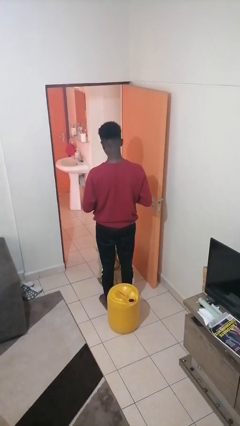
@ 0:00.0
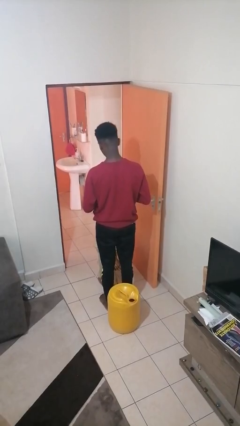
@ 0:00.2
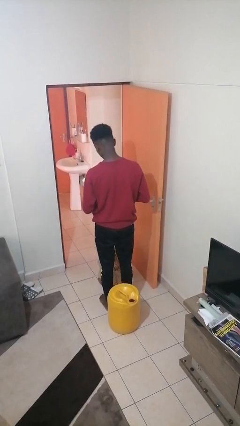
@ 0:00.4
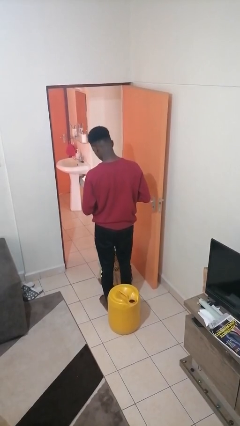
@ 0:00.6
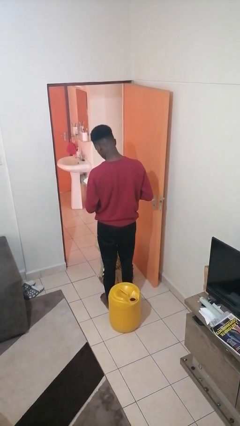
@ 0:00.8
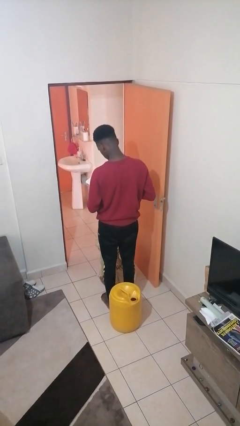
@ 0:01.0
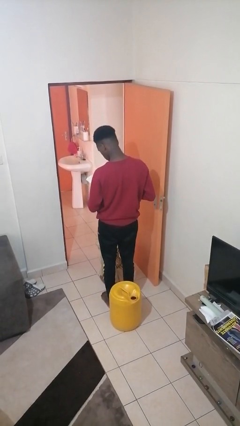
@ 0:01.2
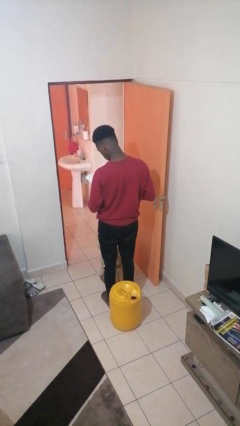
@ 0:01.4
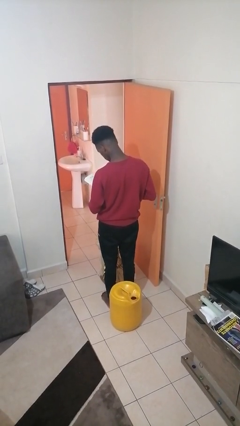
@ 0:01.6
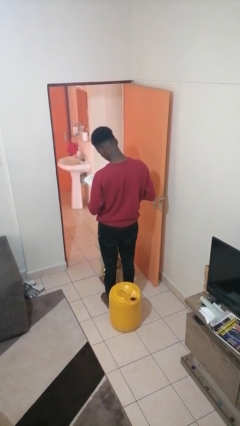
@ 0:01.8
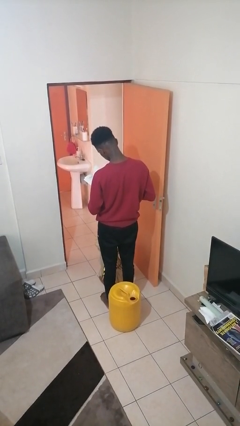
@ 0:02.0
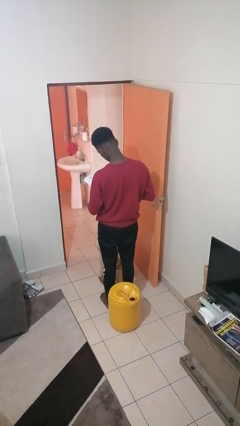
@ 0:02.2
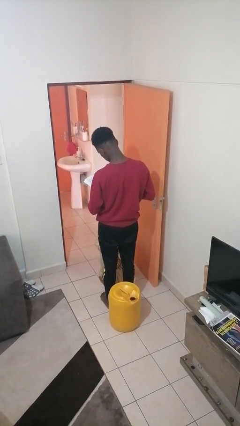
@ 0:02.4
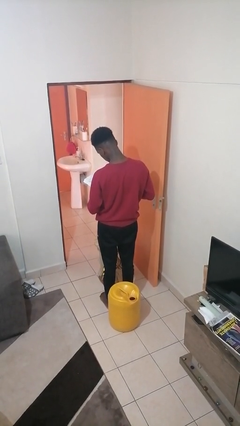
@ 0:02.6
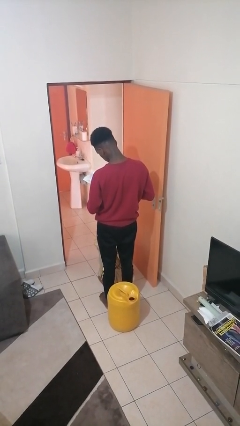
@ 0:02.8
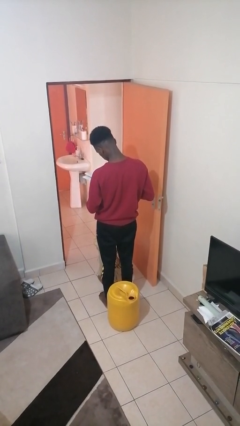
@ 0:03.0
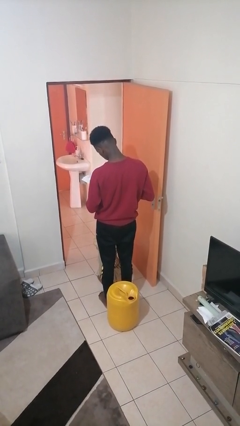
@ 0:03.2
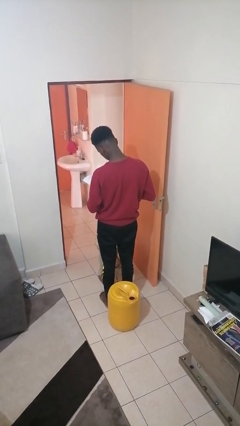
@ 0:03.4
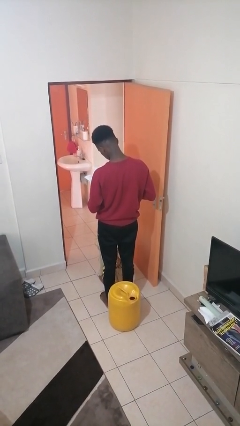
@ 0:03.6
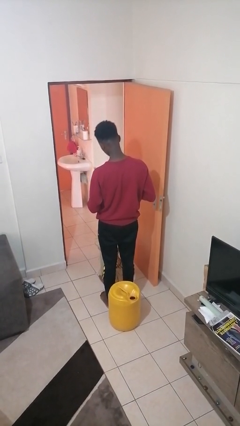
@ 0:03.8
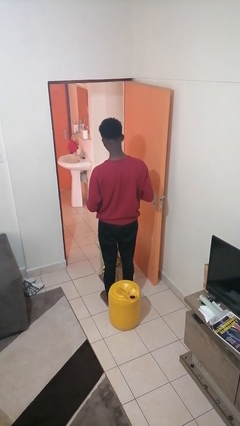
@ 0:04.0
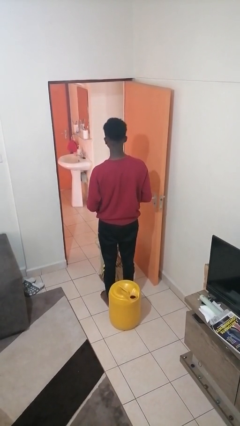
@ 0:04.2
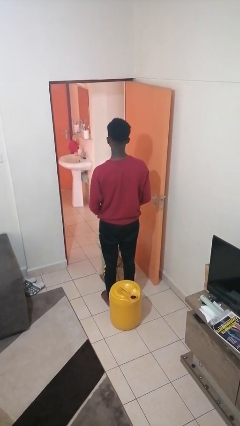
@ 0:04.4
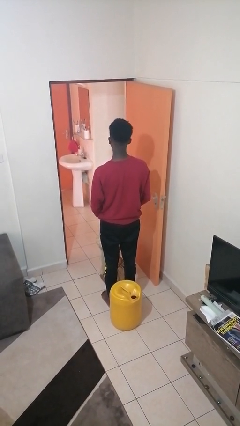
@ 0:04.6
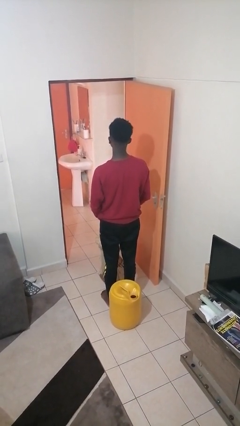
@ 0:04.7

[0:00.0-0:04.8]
person reads book

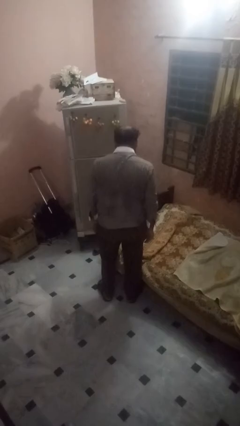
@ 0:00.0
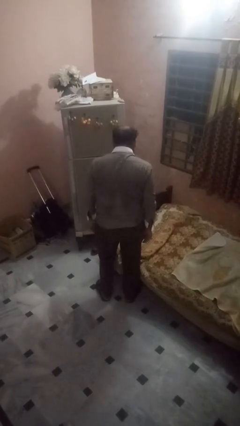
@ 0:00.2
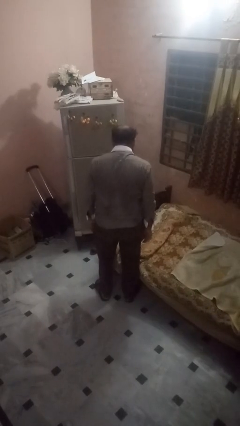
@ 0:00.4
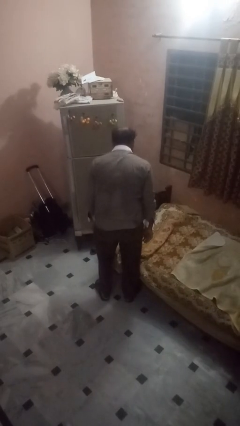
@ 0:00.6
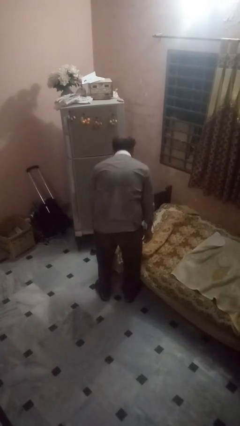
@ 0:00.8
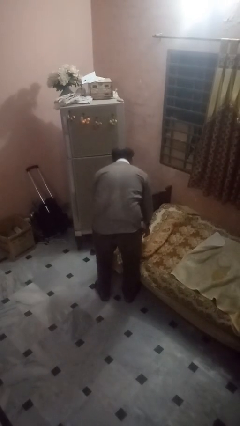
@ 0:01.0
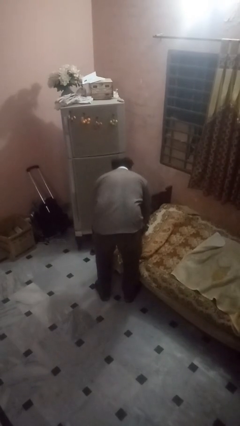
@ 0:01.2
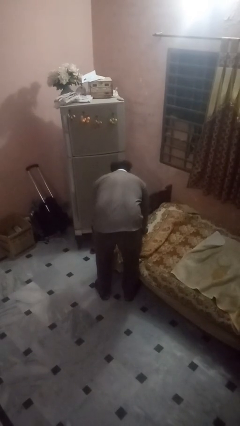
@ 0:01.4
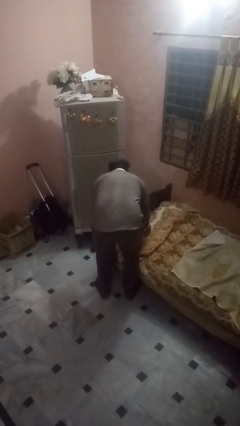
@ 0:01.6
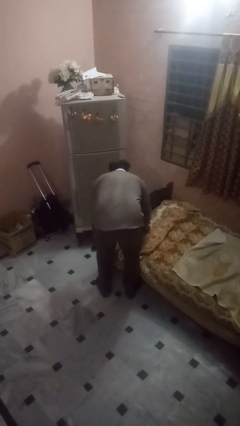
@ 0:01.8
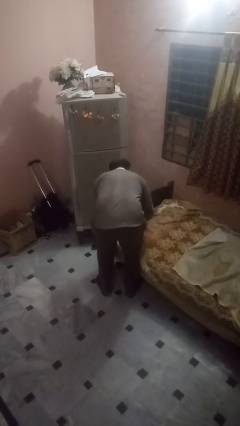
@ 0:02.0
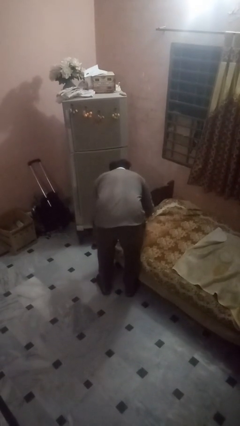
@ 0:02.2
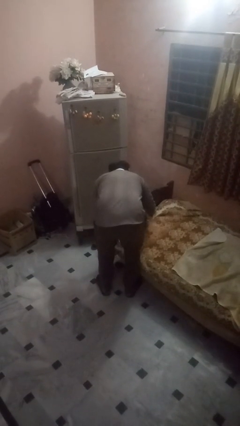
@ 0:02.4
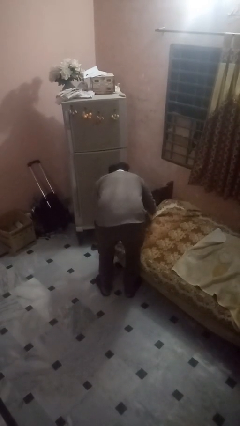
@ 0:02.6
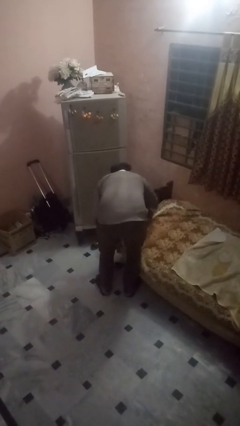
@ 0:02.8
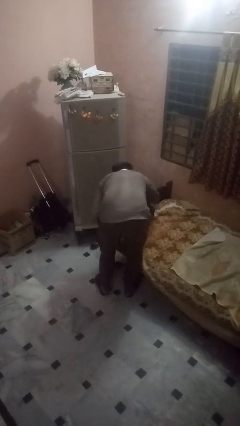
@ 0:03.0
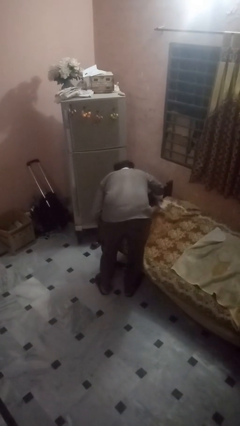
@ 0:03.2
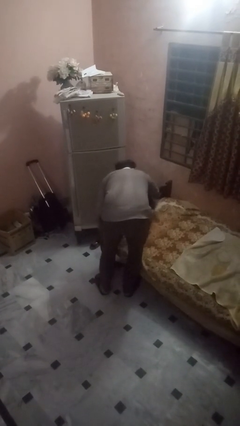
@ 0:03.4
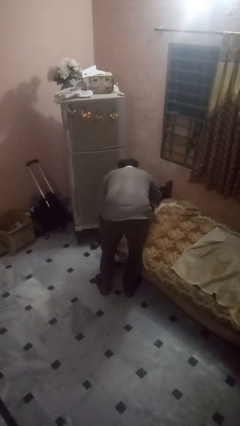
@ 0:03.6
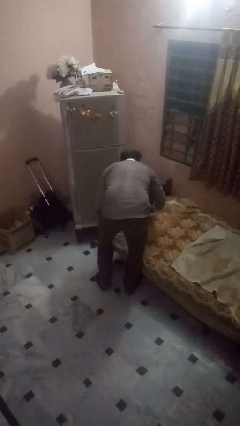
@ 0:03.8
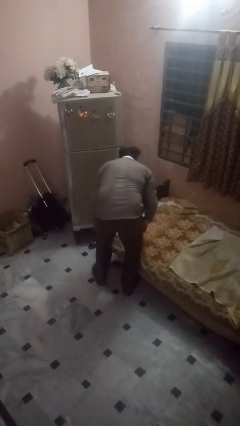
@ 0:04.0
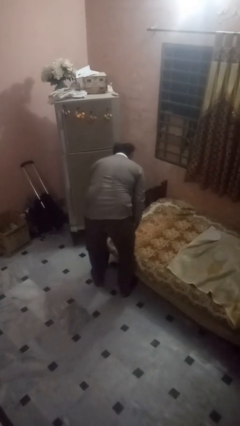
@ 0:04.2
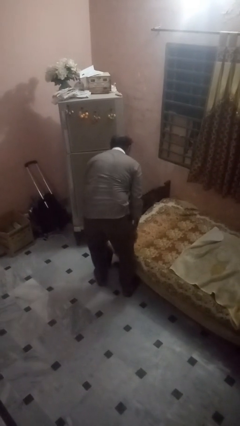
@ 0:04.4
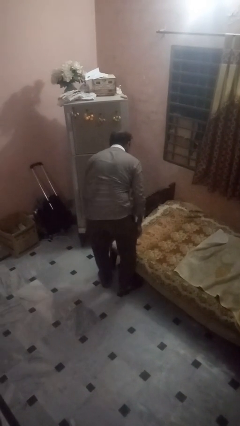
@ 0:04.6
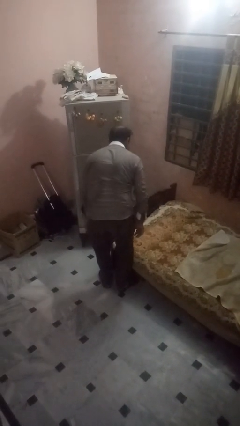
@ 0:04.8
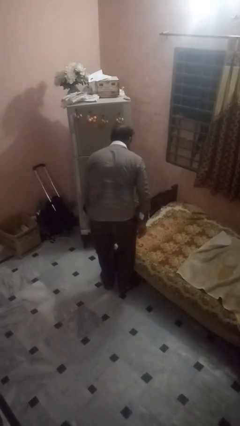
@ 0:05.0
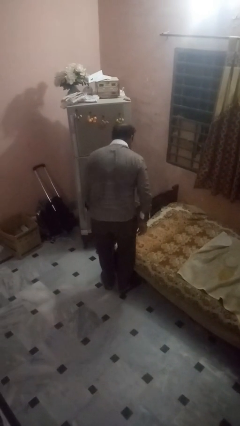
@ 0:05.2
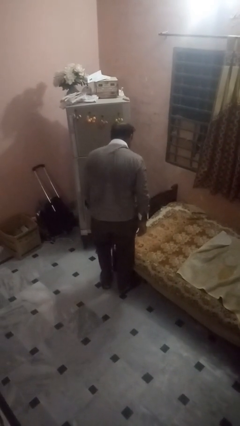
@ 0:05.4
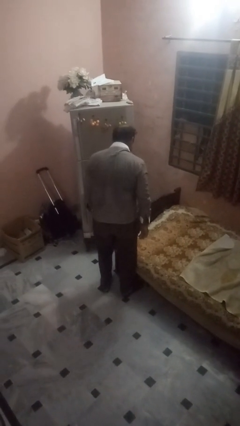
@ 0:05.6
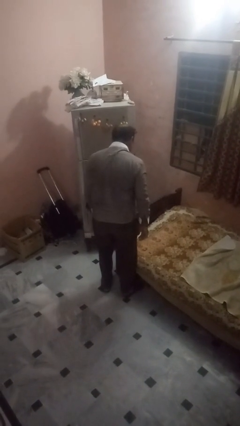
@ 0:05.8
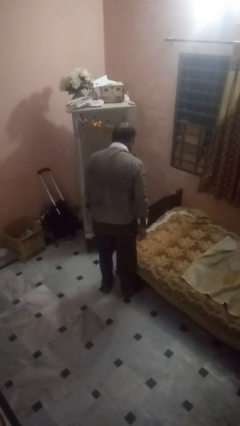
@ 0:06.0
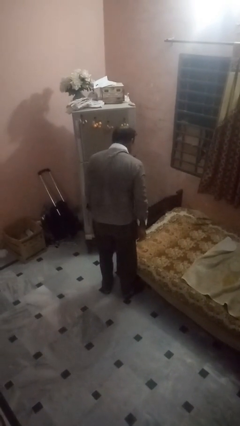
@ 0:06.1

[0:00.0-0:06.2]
person makes bed

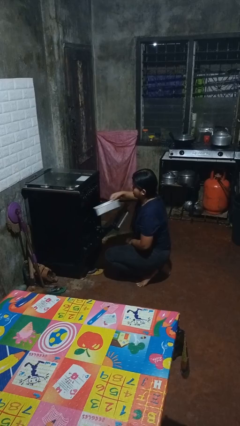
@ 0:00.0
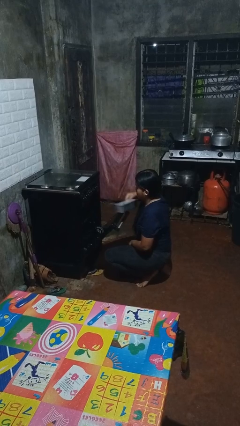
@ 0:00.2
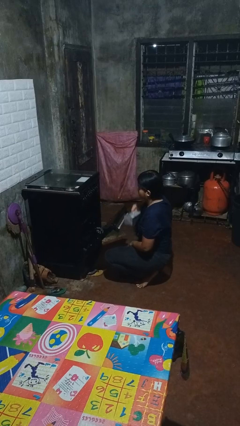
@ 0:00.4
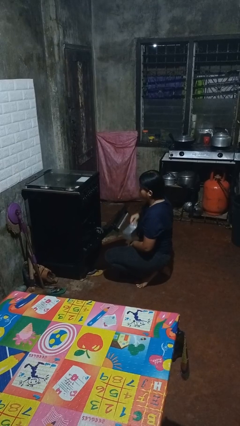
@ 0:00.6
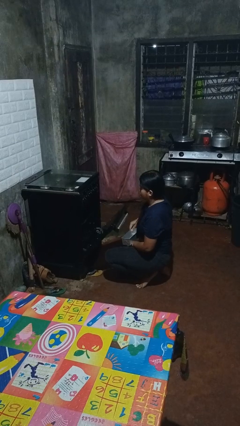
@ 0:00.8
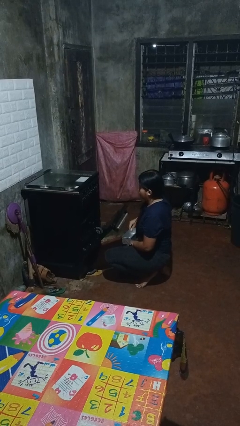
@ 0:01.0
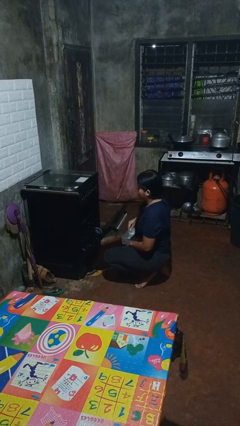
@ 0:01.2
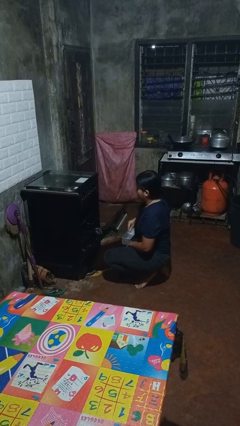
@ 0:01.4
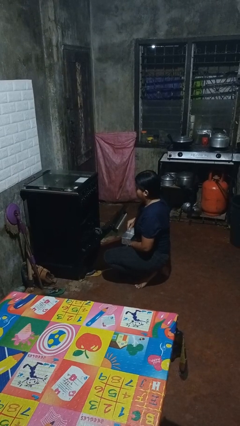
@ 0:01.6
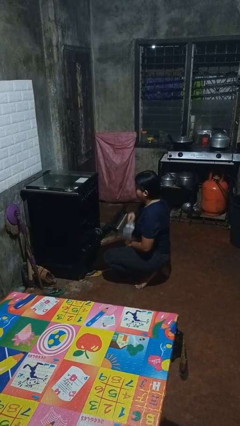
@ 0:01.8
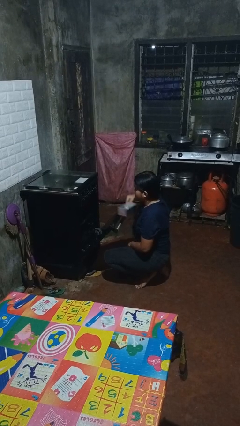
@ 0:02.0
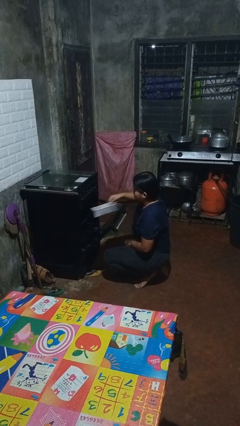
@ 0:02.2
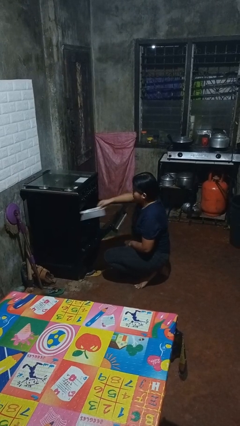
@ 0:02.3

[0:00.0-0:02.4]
person takes object from oven

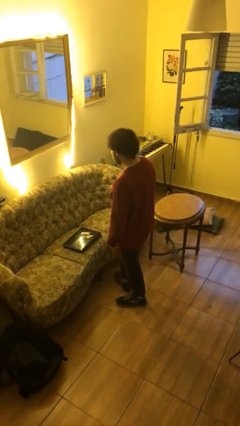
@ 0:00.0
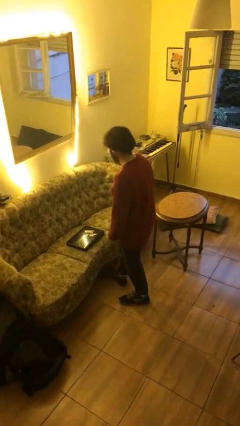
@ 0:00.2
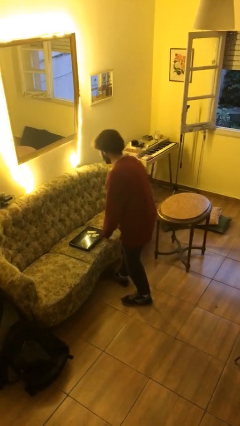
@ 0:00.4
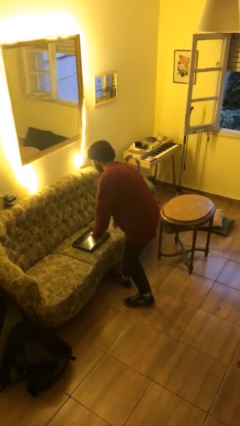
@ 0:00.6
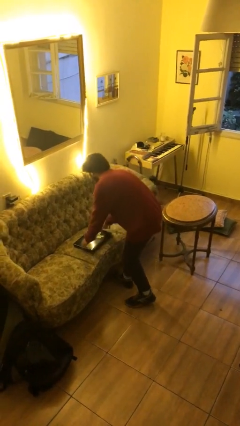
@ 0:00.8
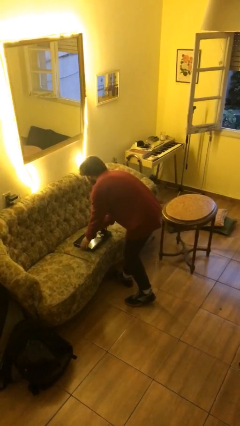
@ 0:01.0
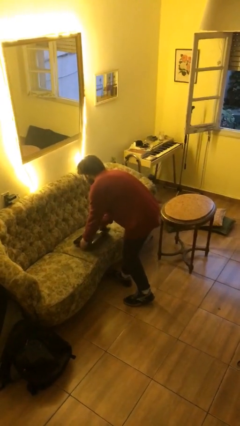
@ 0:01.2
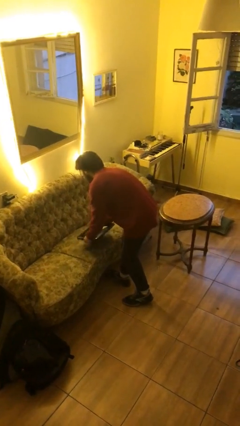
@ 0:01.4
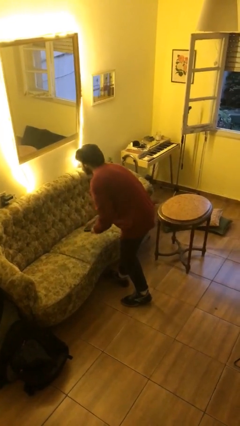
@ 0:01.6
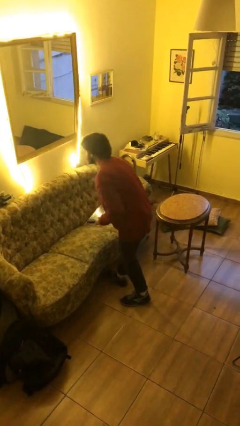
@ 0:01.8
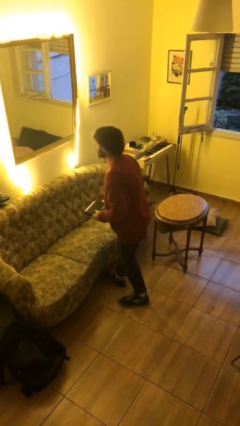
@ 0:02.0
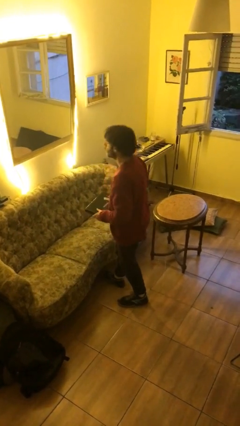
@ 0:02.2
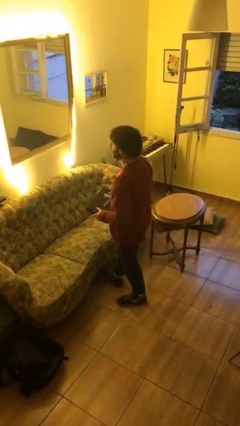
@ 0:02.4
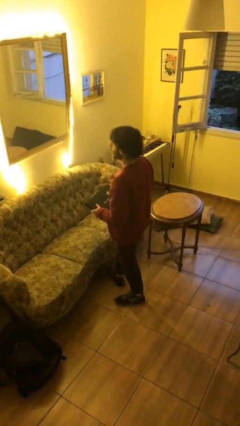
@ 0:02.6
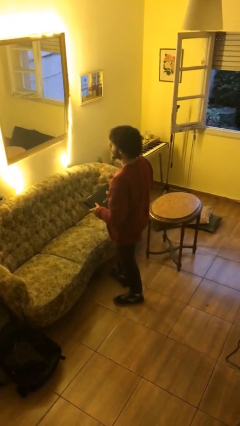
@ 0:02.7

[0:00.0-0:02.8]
person picks up object from couch

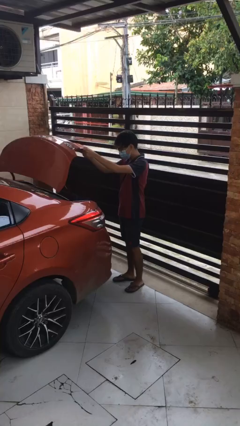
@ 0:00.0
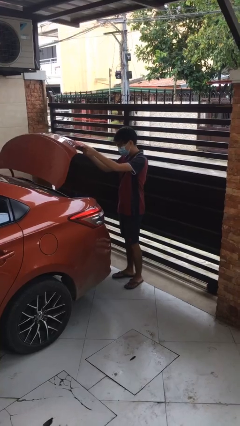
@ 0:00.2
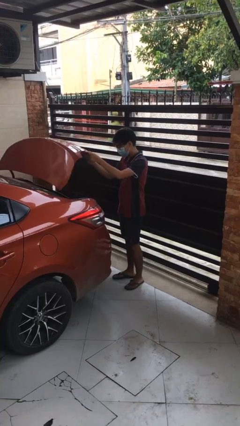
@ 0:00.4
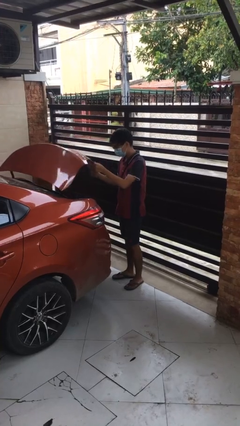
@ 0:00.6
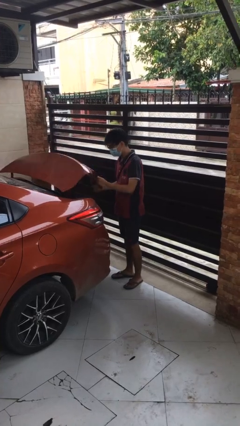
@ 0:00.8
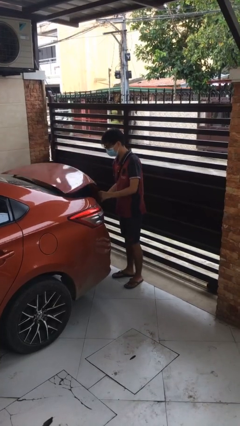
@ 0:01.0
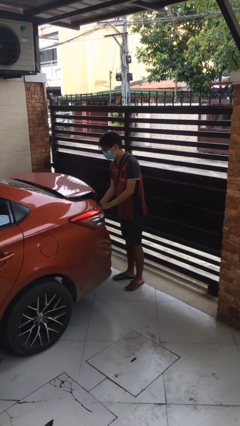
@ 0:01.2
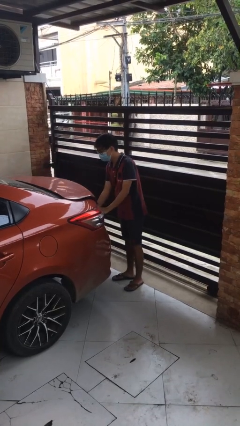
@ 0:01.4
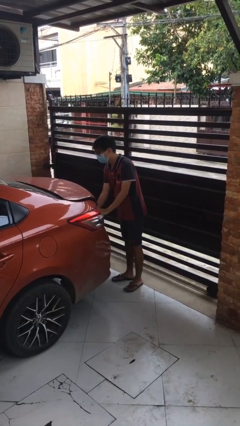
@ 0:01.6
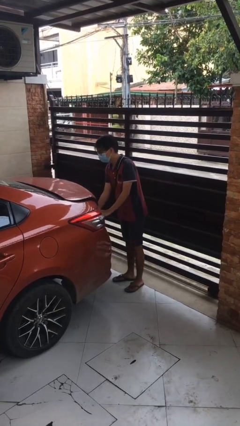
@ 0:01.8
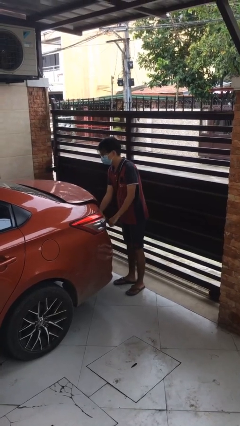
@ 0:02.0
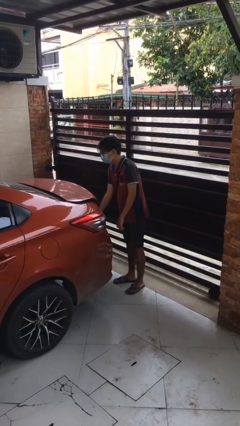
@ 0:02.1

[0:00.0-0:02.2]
person closes car trunk
